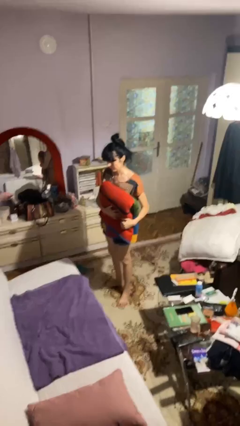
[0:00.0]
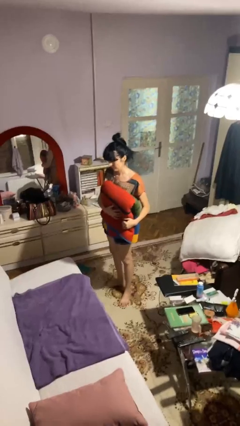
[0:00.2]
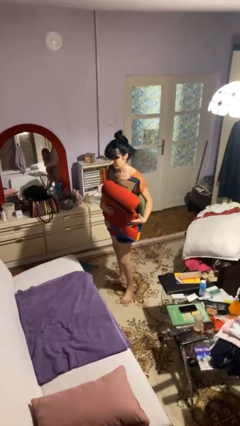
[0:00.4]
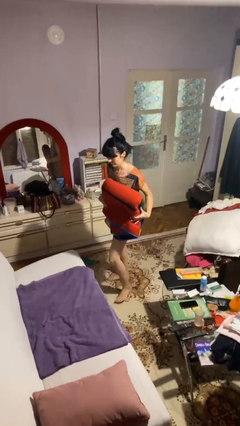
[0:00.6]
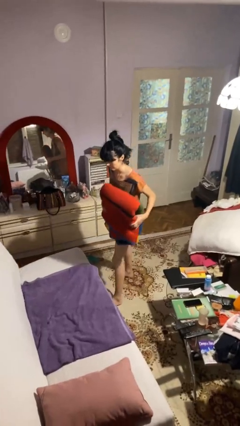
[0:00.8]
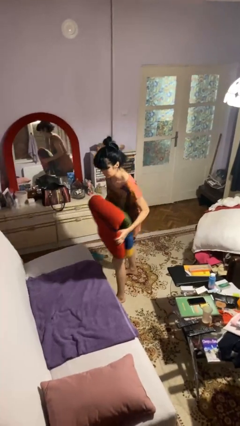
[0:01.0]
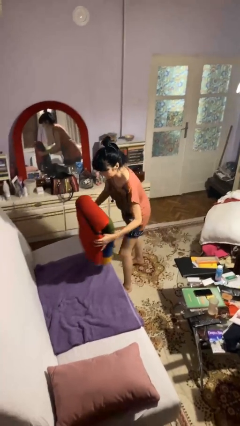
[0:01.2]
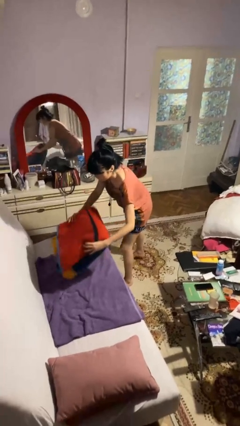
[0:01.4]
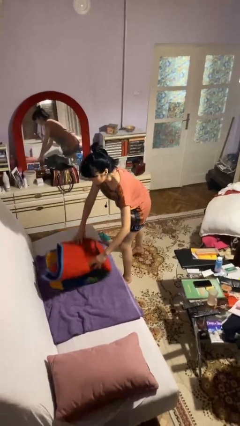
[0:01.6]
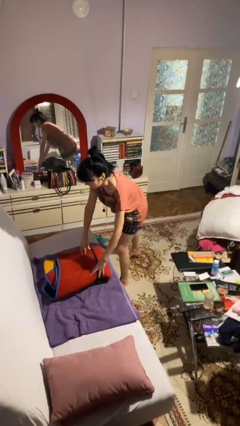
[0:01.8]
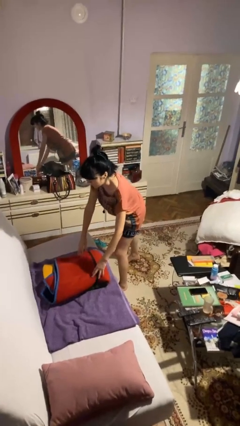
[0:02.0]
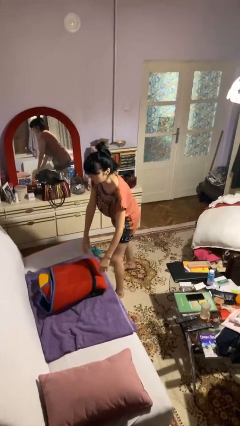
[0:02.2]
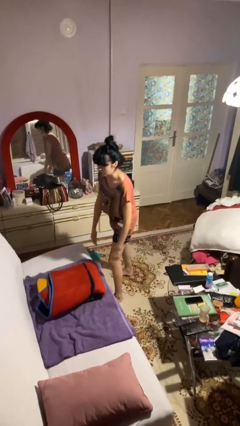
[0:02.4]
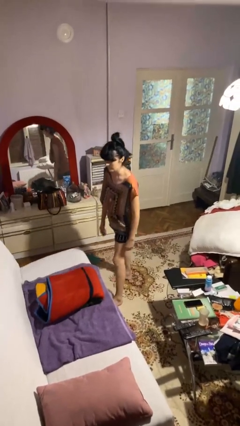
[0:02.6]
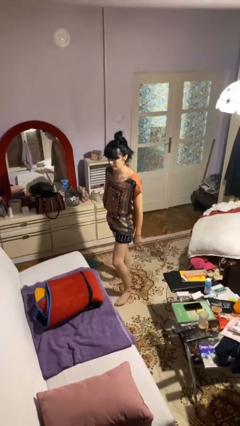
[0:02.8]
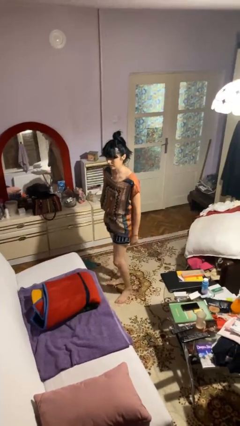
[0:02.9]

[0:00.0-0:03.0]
person puts down object on couch

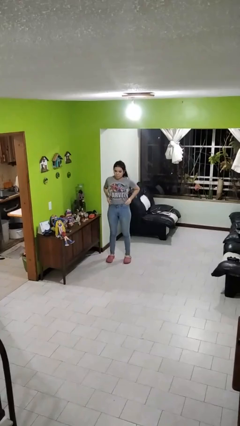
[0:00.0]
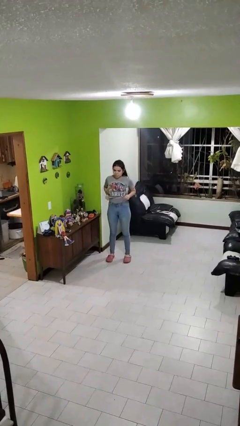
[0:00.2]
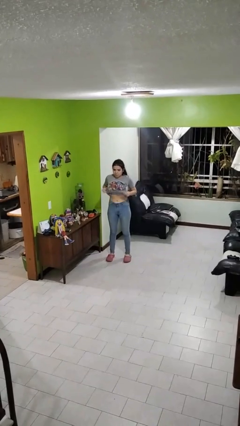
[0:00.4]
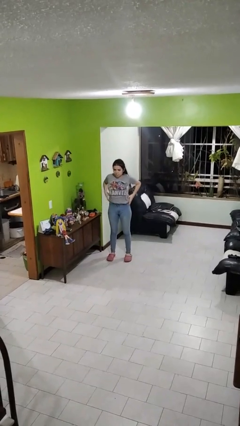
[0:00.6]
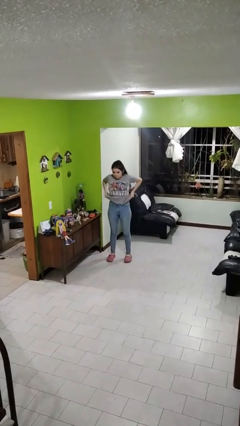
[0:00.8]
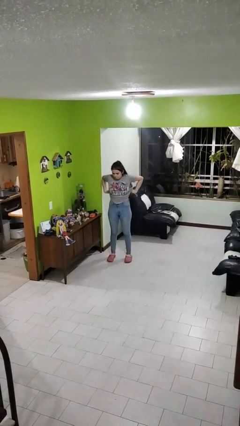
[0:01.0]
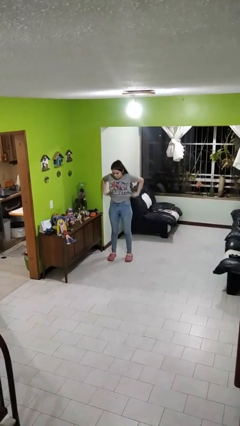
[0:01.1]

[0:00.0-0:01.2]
person untucks shirt

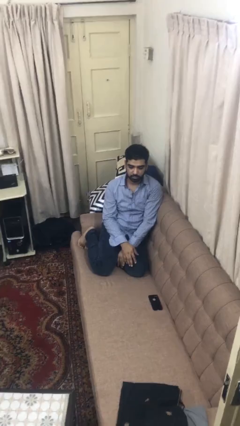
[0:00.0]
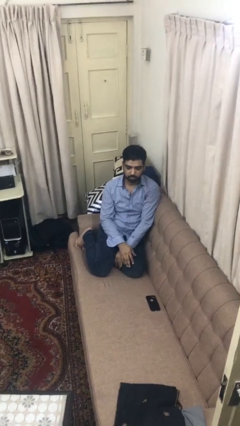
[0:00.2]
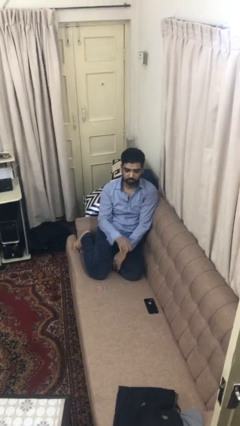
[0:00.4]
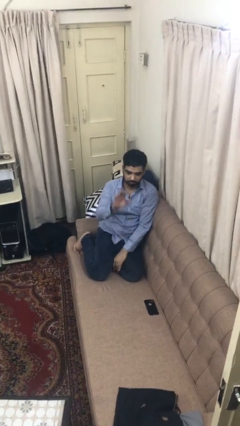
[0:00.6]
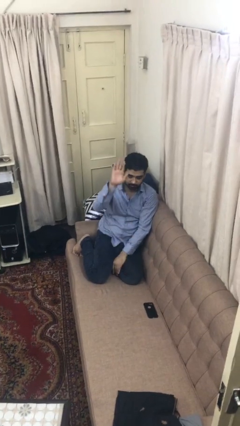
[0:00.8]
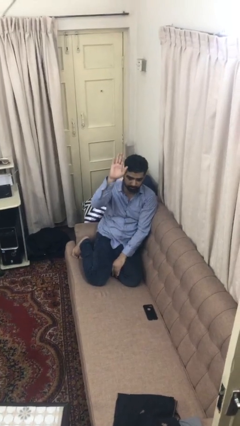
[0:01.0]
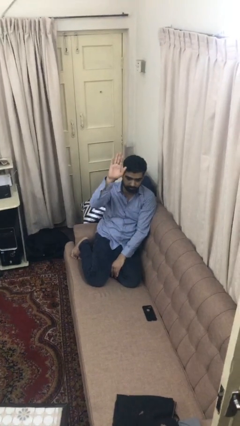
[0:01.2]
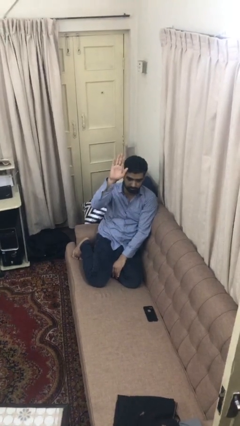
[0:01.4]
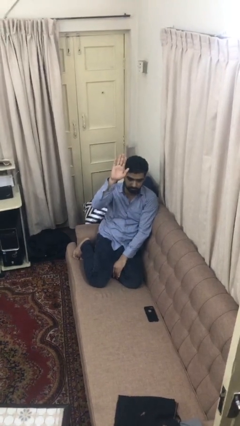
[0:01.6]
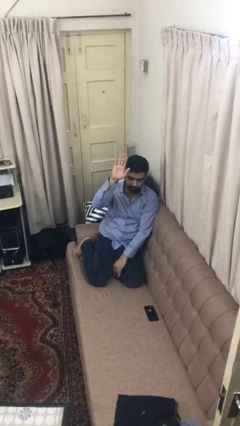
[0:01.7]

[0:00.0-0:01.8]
person gestures raise hand

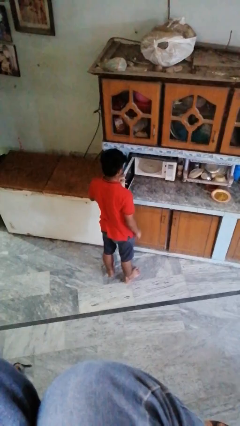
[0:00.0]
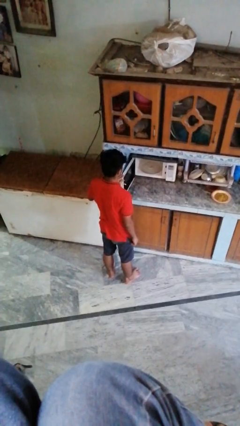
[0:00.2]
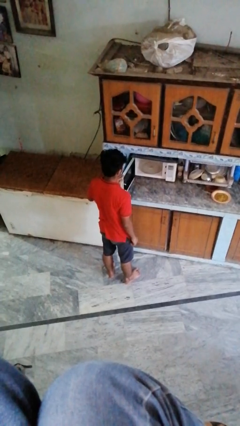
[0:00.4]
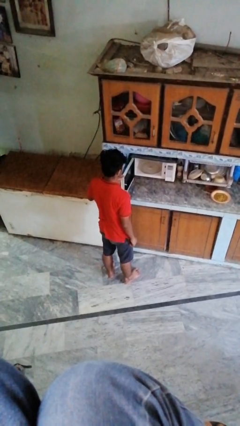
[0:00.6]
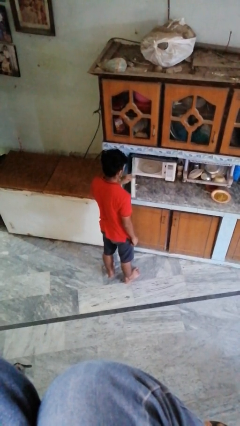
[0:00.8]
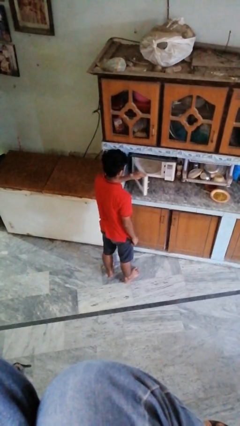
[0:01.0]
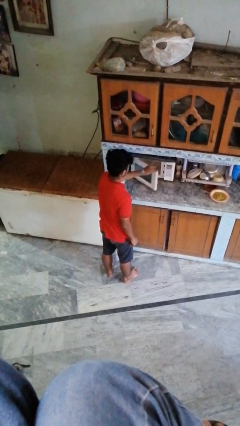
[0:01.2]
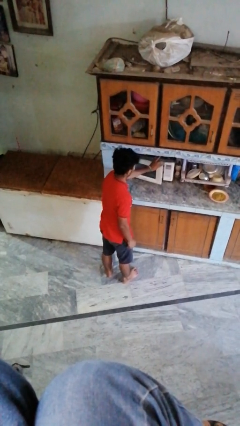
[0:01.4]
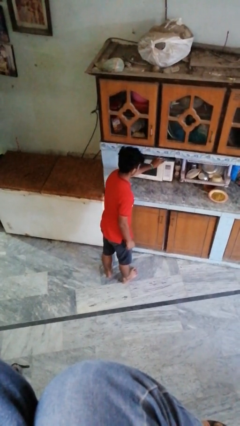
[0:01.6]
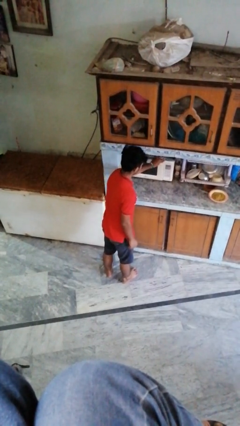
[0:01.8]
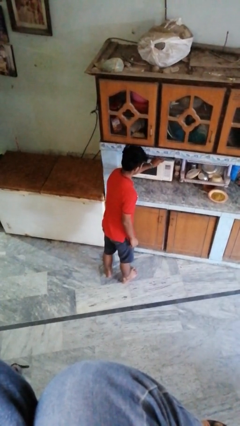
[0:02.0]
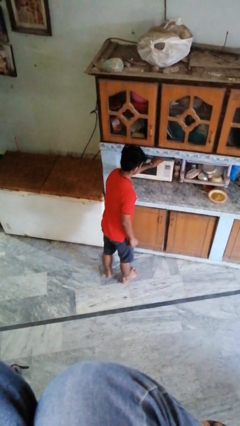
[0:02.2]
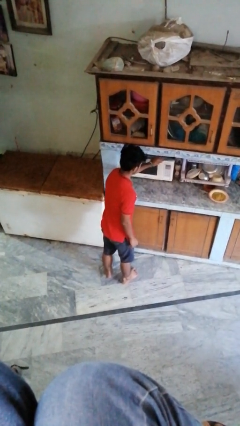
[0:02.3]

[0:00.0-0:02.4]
person closes oven door

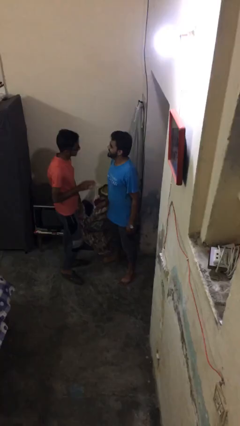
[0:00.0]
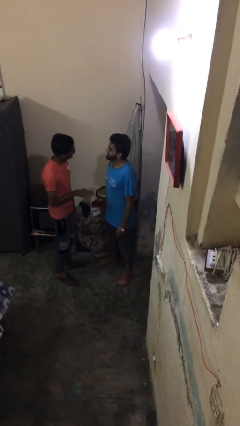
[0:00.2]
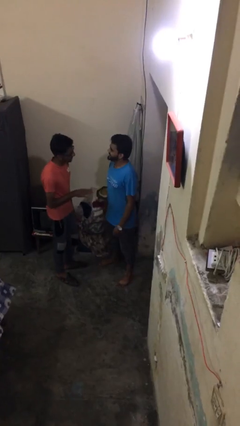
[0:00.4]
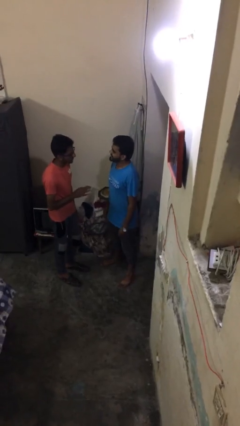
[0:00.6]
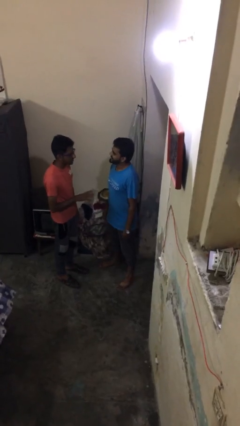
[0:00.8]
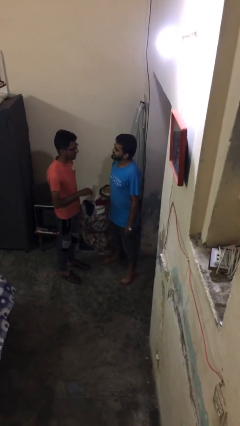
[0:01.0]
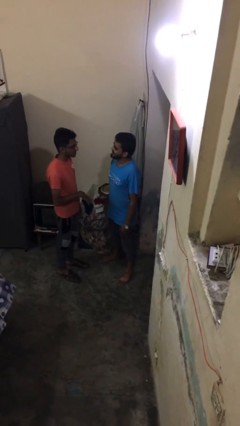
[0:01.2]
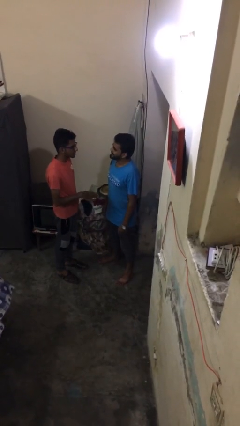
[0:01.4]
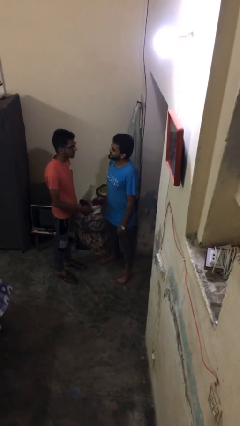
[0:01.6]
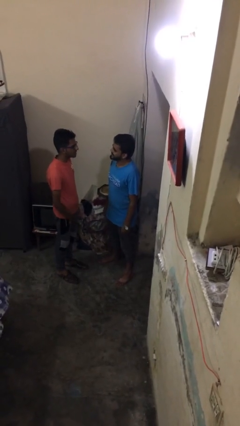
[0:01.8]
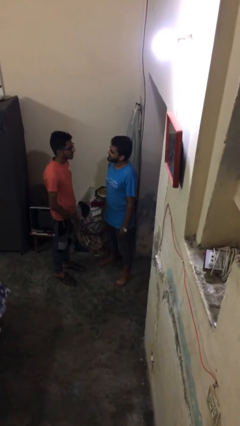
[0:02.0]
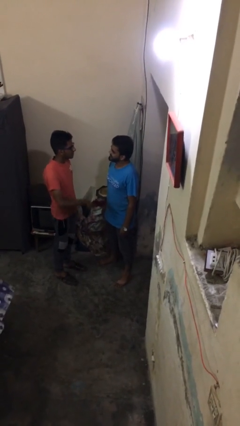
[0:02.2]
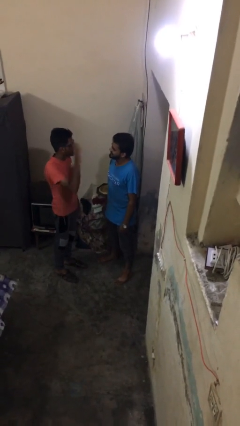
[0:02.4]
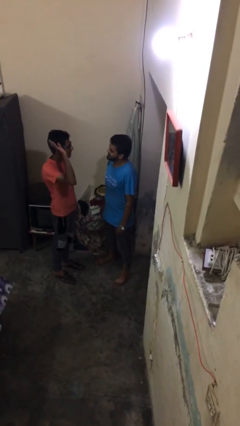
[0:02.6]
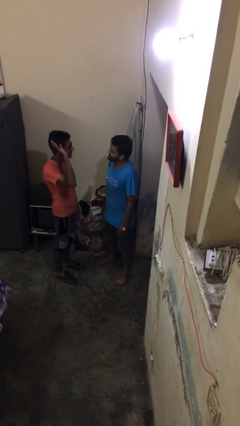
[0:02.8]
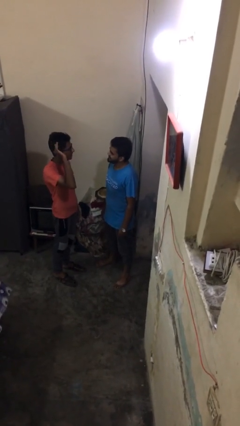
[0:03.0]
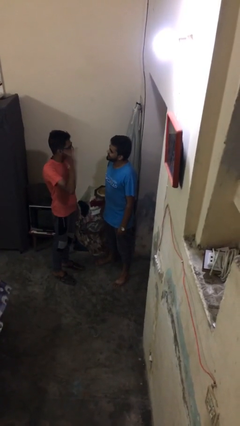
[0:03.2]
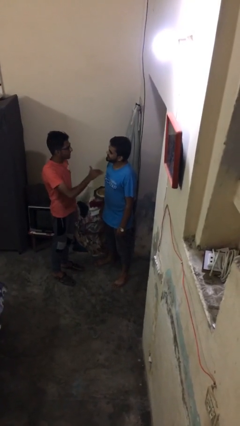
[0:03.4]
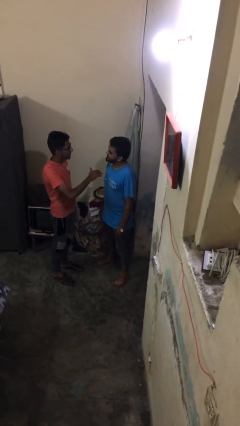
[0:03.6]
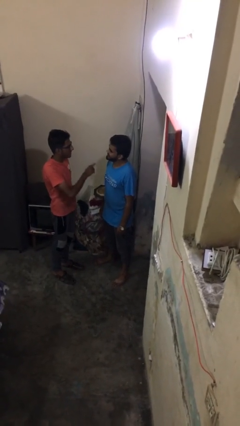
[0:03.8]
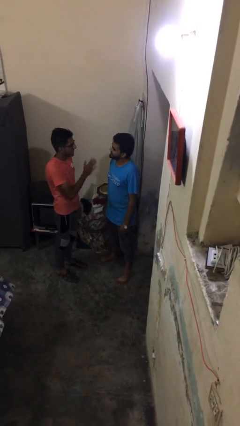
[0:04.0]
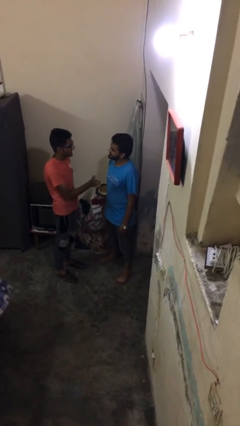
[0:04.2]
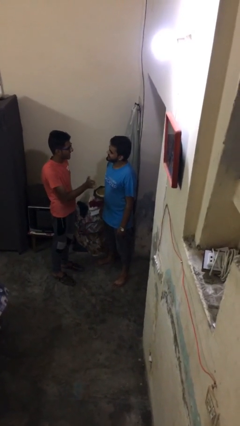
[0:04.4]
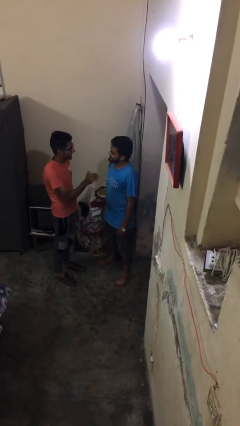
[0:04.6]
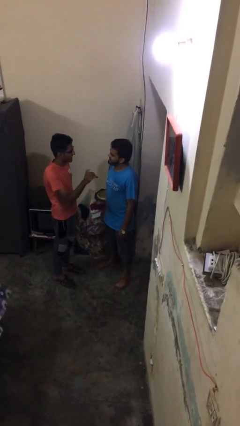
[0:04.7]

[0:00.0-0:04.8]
person talks to person

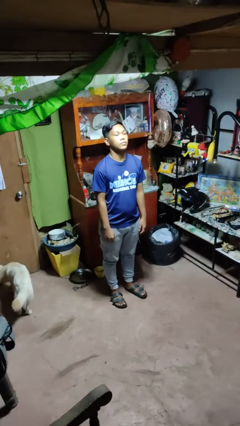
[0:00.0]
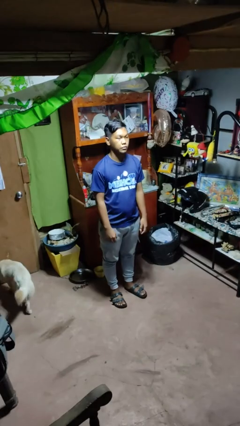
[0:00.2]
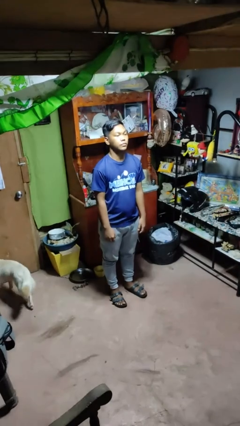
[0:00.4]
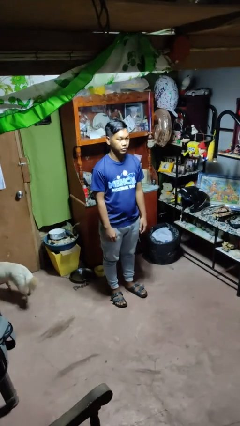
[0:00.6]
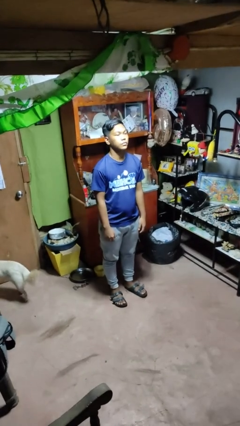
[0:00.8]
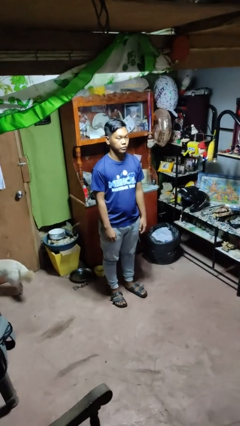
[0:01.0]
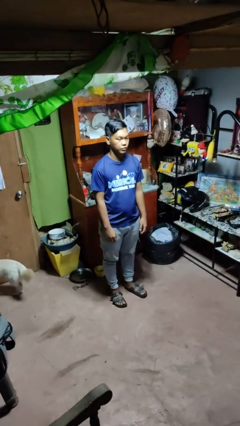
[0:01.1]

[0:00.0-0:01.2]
person nods head

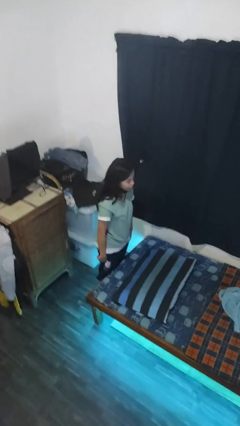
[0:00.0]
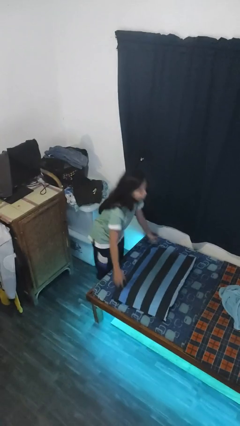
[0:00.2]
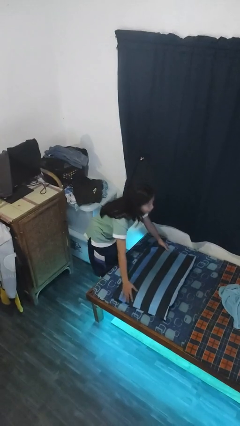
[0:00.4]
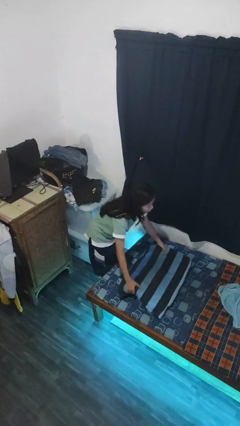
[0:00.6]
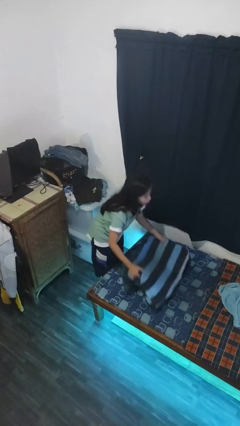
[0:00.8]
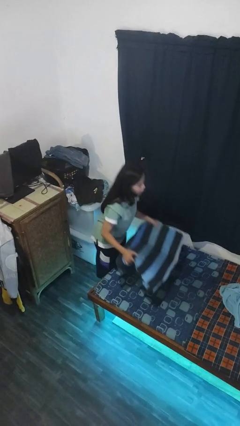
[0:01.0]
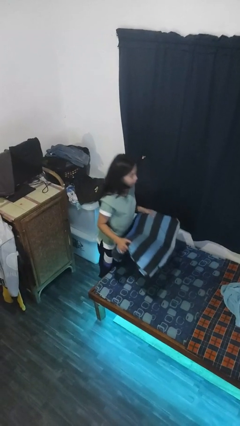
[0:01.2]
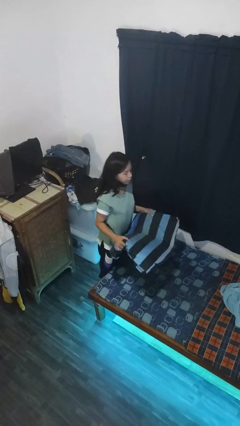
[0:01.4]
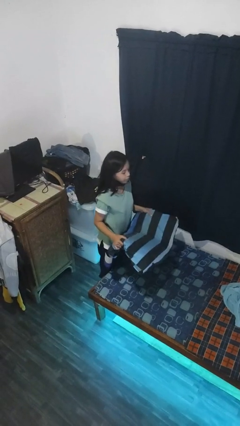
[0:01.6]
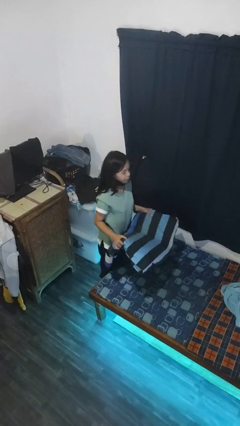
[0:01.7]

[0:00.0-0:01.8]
person picks up object from bed

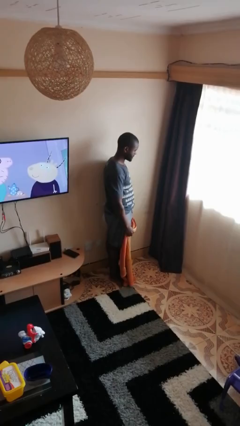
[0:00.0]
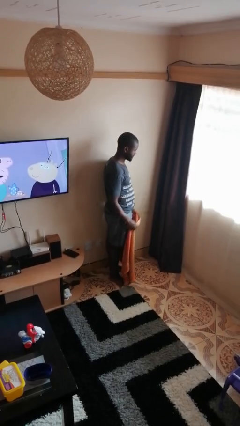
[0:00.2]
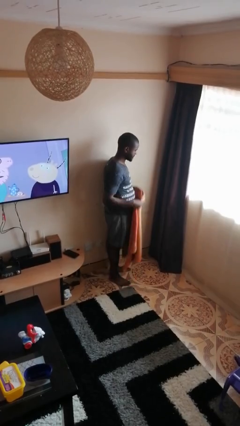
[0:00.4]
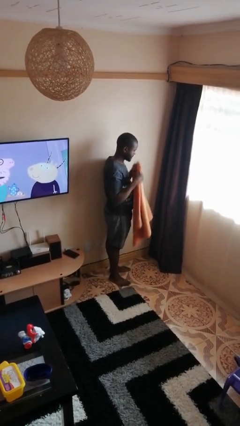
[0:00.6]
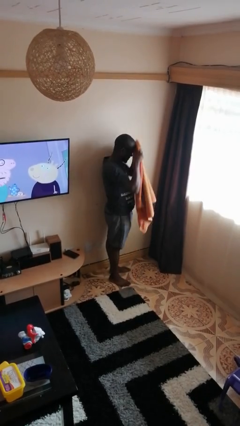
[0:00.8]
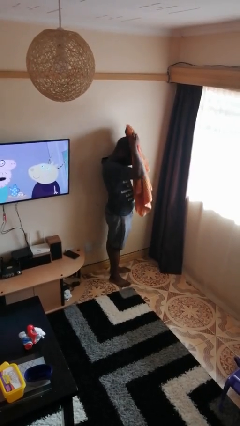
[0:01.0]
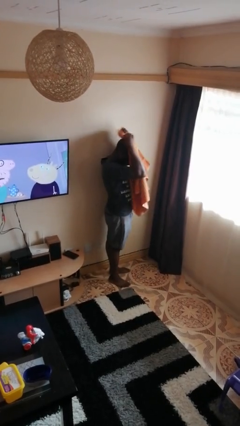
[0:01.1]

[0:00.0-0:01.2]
person dries hair with towel
